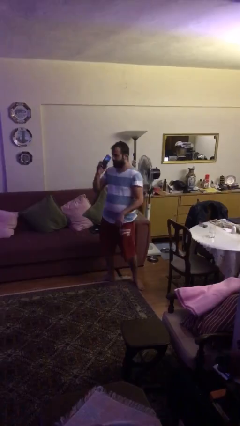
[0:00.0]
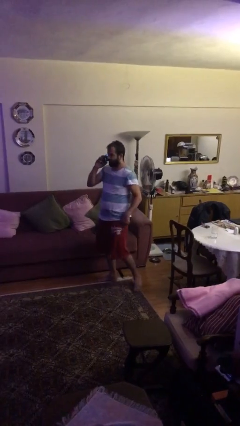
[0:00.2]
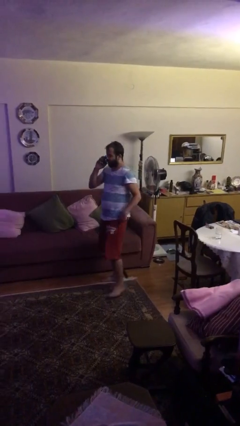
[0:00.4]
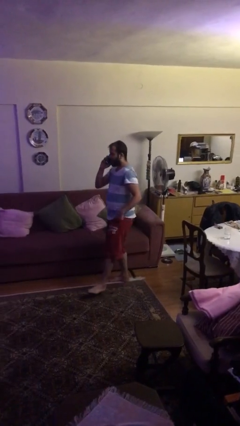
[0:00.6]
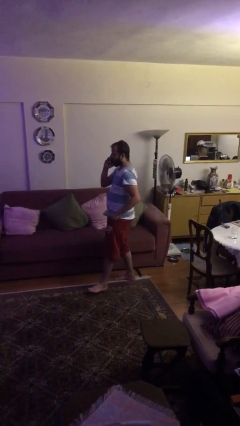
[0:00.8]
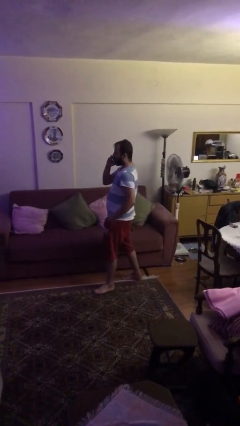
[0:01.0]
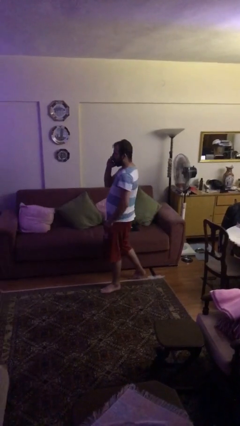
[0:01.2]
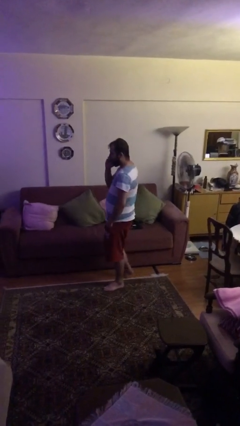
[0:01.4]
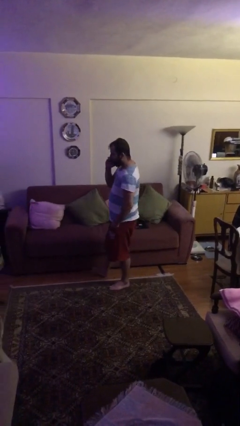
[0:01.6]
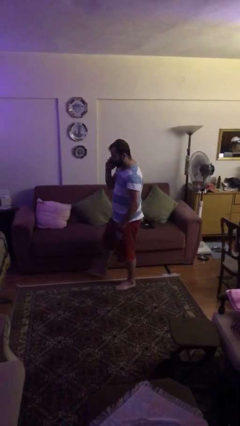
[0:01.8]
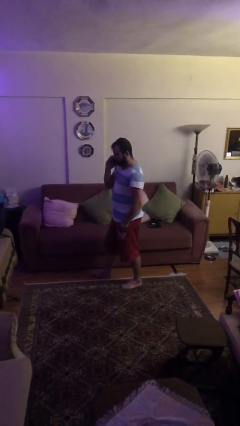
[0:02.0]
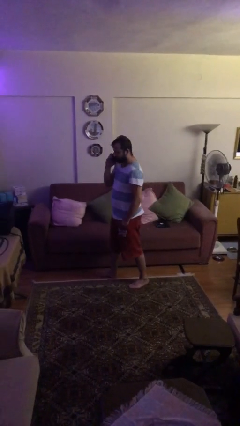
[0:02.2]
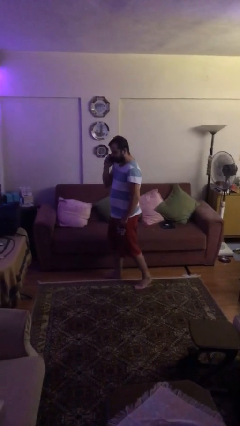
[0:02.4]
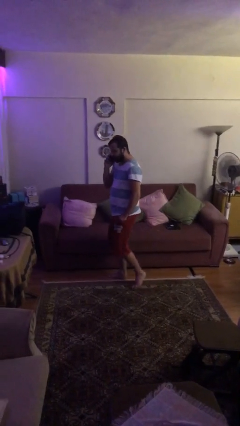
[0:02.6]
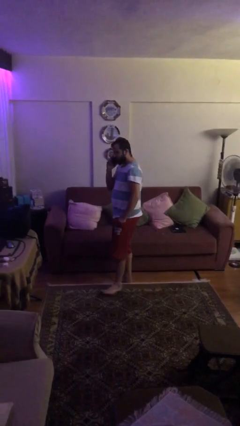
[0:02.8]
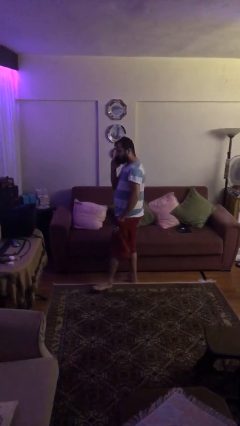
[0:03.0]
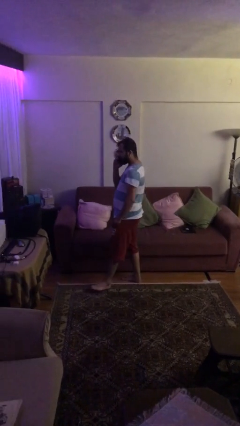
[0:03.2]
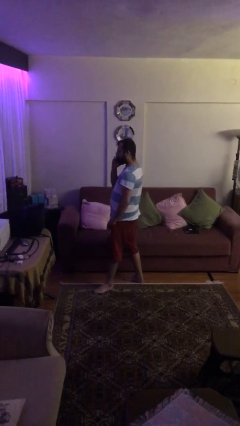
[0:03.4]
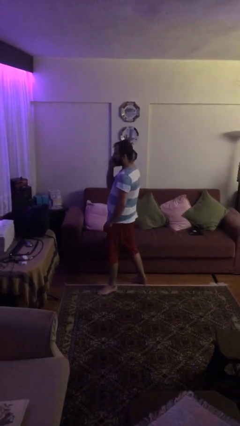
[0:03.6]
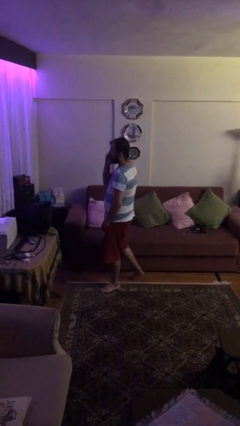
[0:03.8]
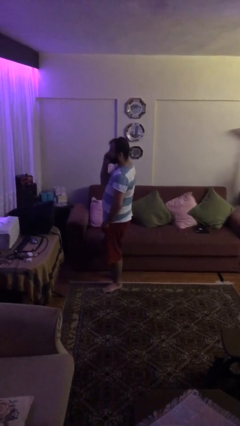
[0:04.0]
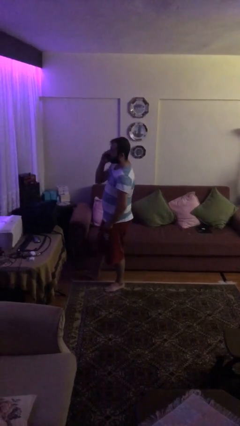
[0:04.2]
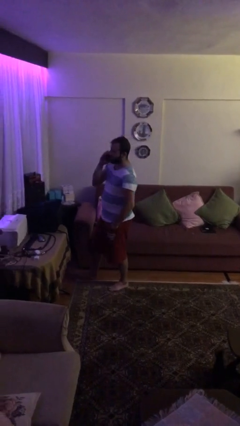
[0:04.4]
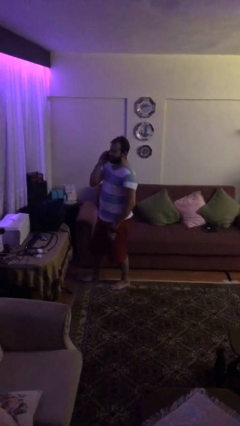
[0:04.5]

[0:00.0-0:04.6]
person talks on phone

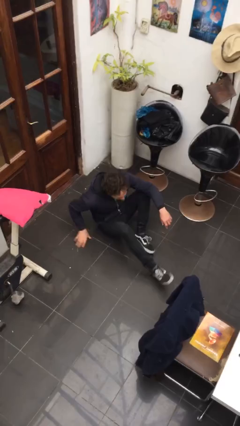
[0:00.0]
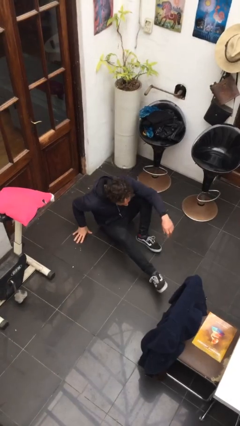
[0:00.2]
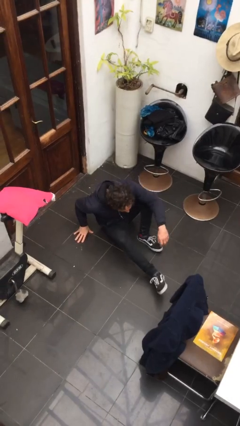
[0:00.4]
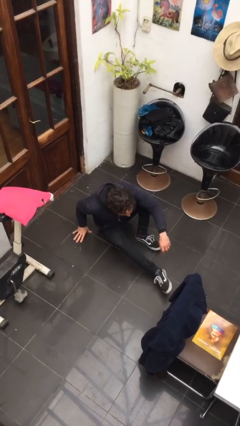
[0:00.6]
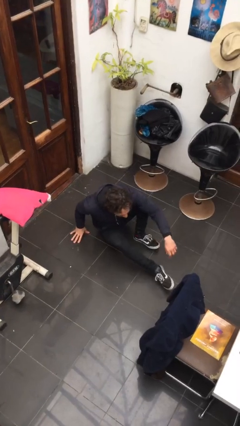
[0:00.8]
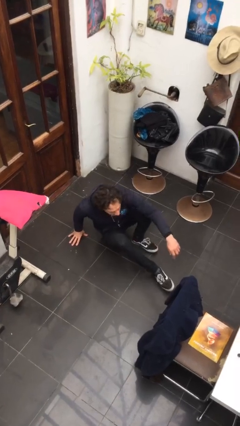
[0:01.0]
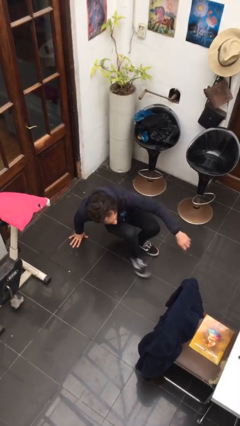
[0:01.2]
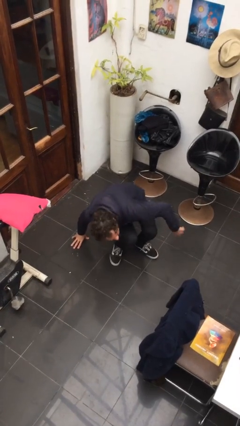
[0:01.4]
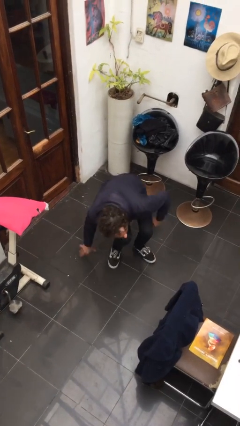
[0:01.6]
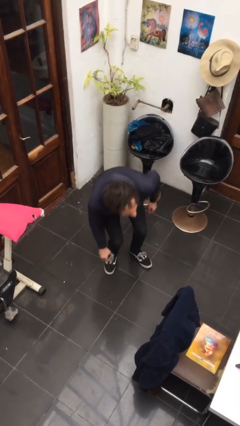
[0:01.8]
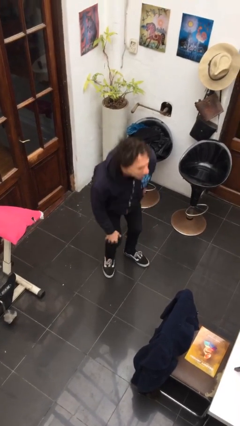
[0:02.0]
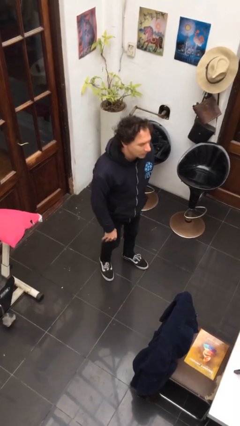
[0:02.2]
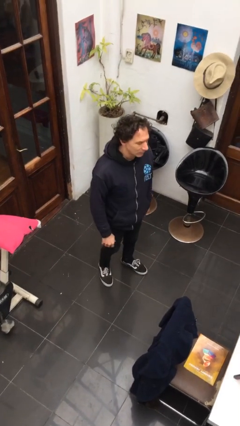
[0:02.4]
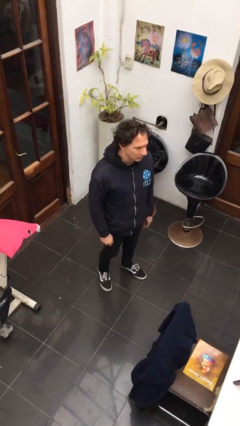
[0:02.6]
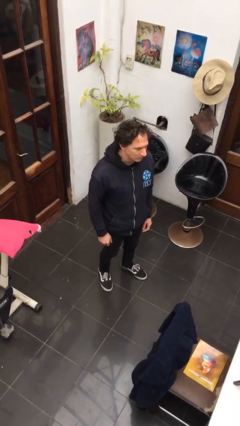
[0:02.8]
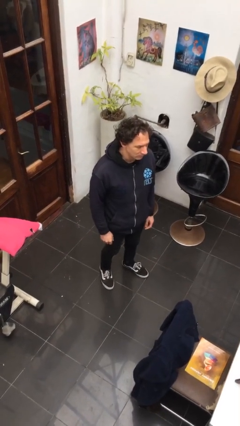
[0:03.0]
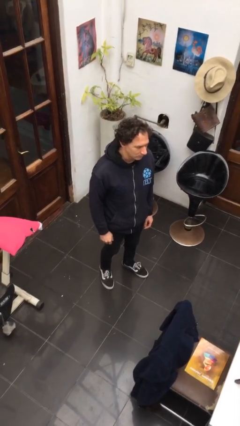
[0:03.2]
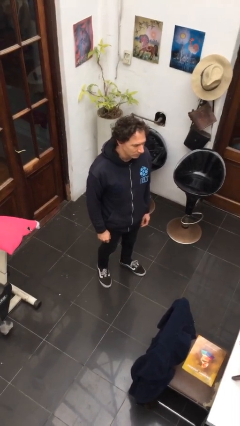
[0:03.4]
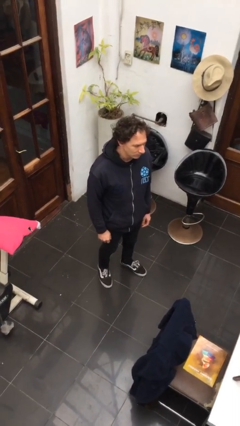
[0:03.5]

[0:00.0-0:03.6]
person stands up from floor

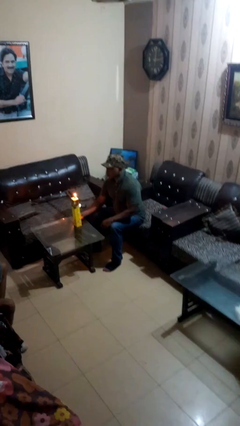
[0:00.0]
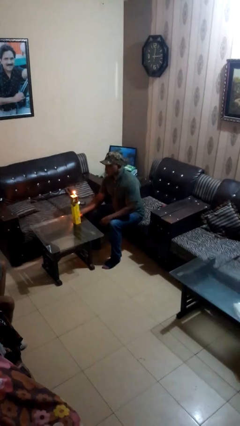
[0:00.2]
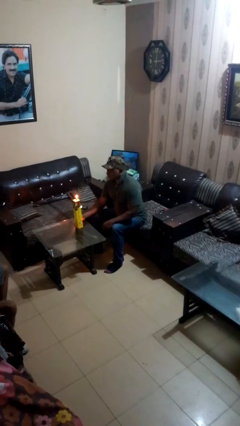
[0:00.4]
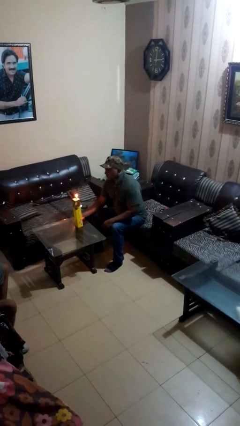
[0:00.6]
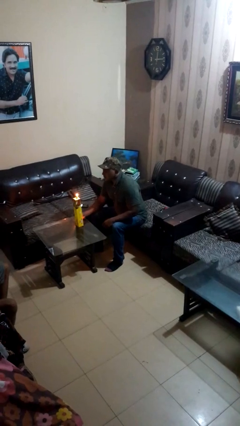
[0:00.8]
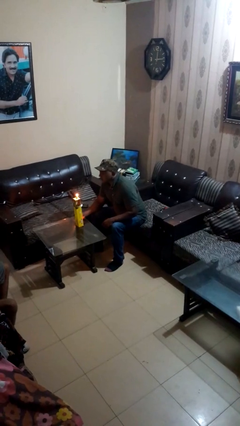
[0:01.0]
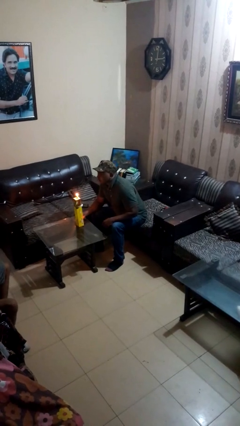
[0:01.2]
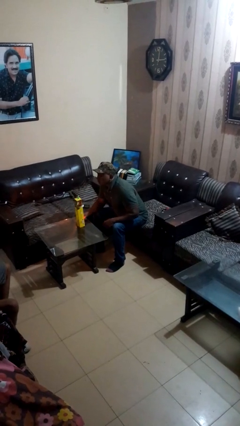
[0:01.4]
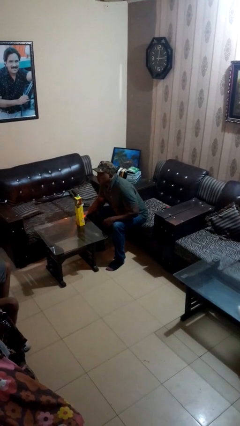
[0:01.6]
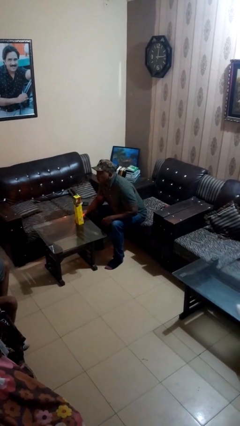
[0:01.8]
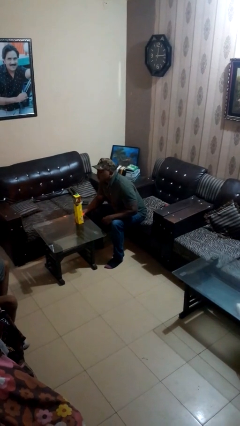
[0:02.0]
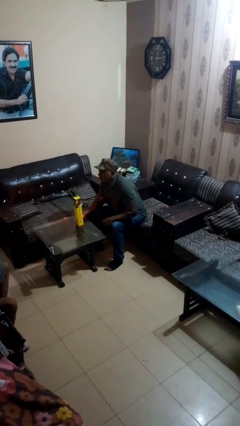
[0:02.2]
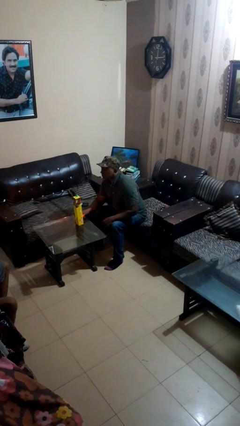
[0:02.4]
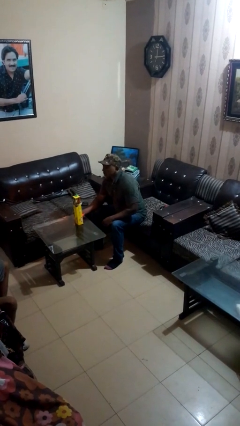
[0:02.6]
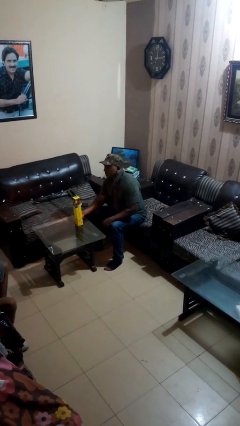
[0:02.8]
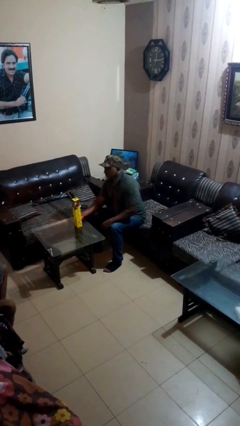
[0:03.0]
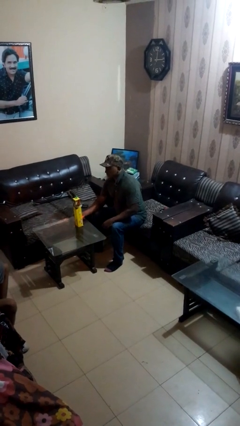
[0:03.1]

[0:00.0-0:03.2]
person extinguishes candle

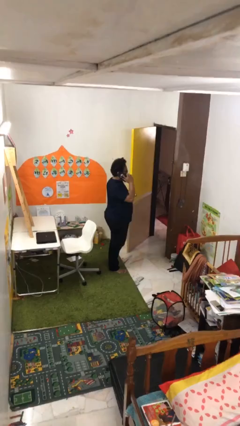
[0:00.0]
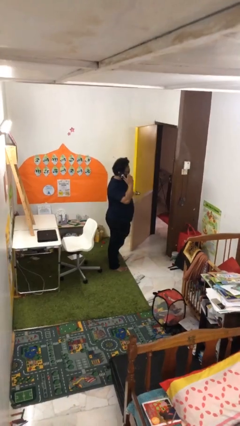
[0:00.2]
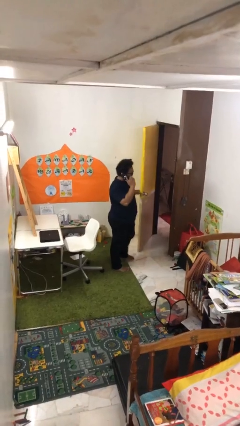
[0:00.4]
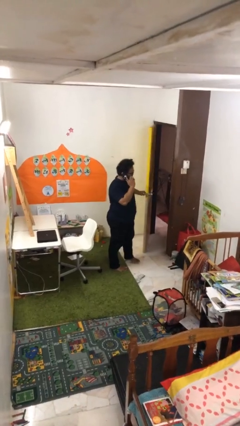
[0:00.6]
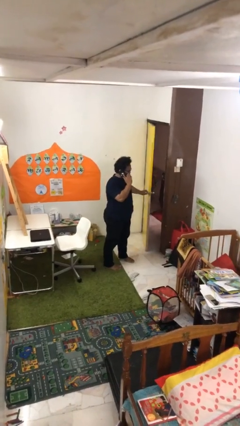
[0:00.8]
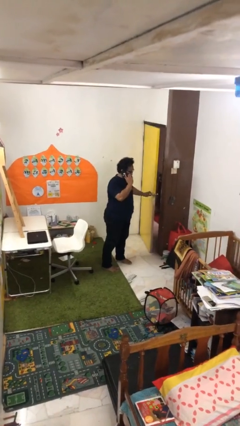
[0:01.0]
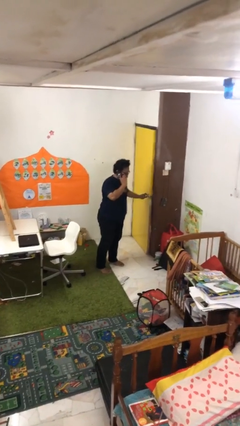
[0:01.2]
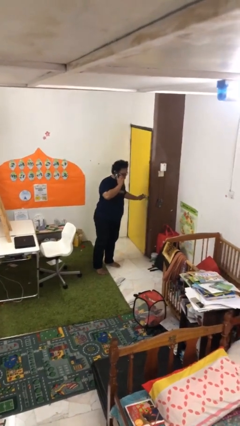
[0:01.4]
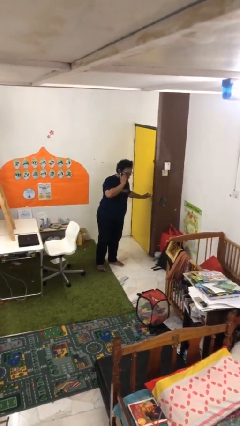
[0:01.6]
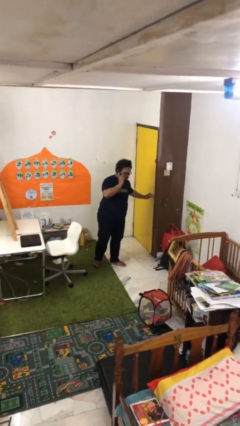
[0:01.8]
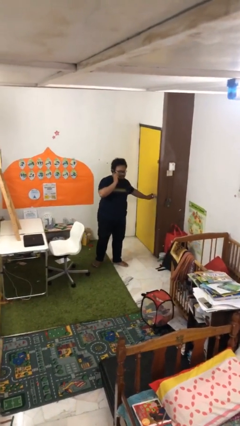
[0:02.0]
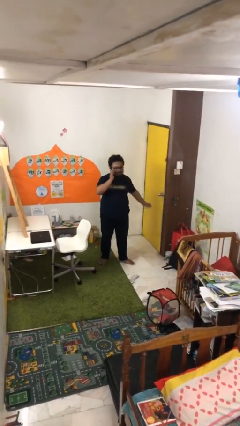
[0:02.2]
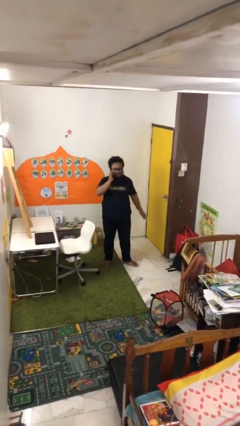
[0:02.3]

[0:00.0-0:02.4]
person closes facility door

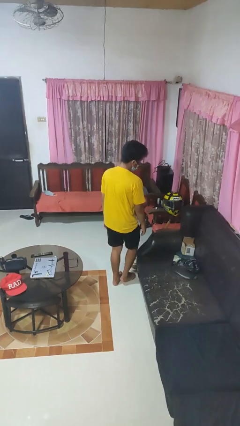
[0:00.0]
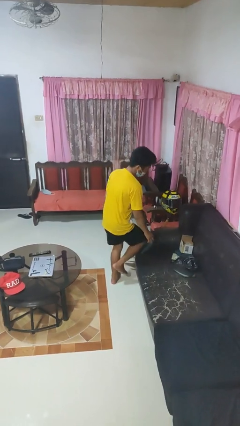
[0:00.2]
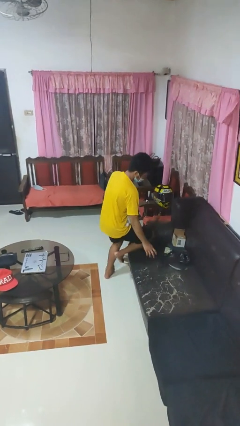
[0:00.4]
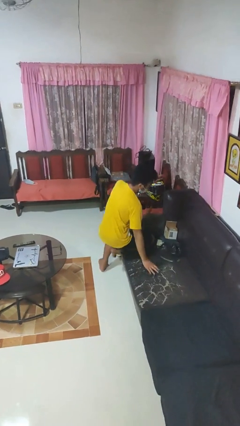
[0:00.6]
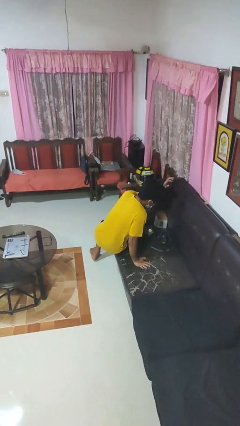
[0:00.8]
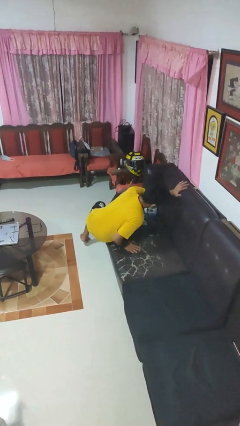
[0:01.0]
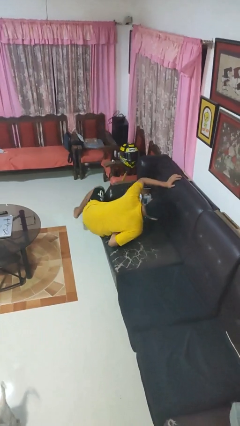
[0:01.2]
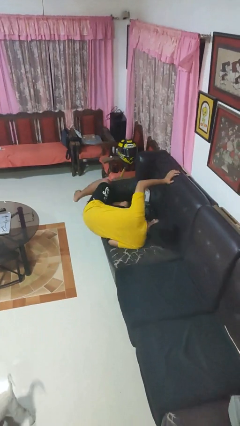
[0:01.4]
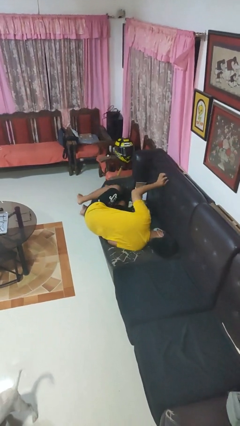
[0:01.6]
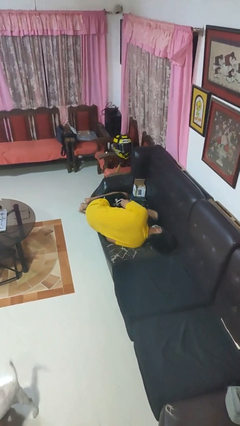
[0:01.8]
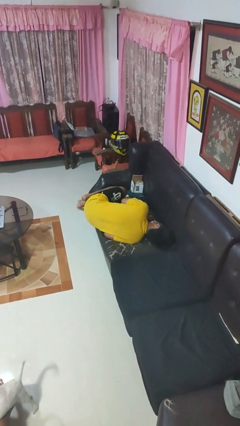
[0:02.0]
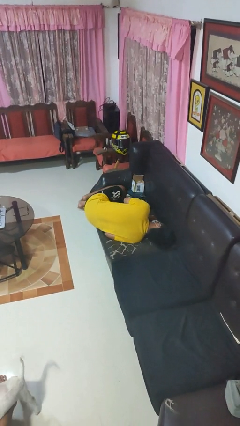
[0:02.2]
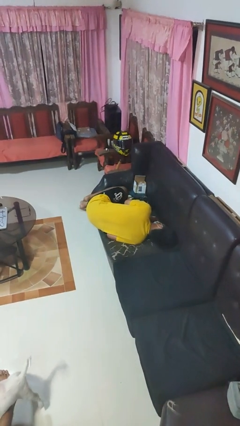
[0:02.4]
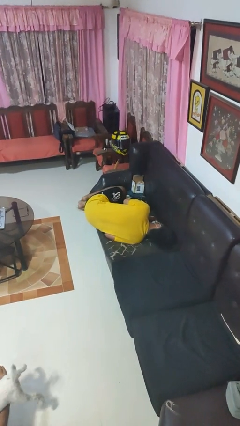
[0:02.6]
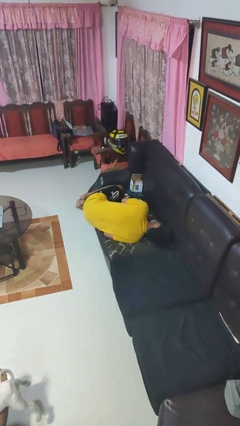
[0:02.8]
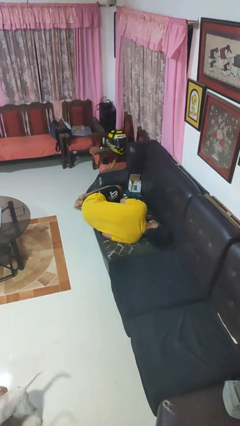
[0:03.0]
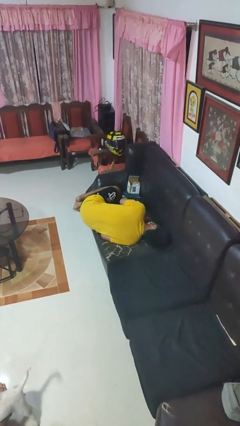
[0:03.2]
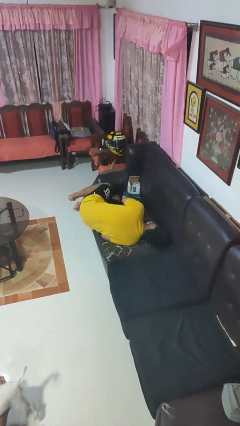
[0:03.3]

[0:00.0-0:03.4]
person lies down on couch

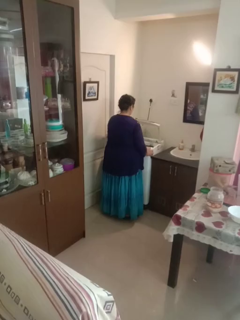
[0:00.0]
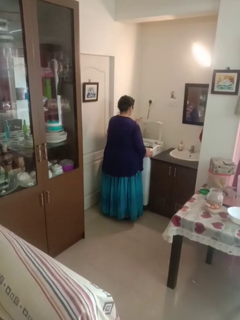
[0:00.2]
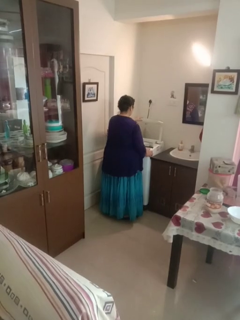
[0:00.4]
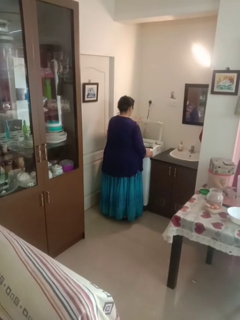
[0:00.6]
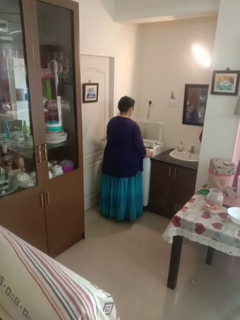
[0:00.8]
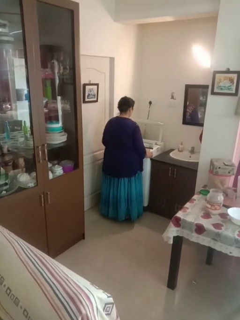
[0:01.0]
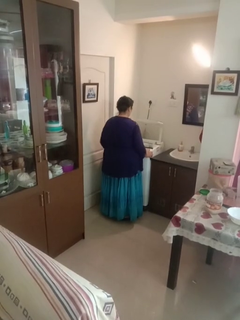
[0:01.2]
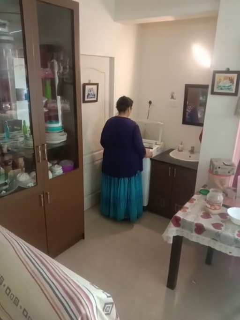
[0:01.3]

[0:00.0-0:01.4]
person opens clothes washer
